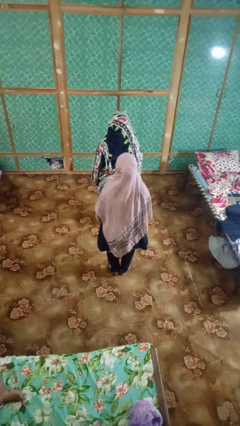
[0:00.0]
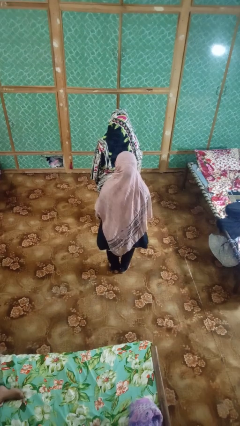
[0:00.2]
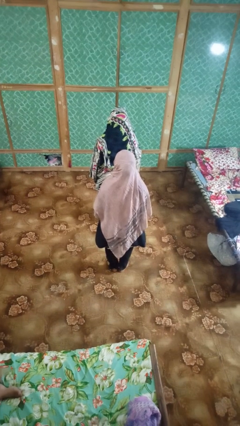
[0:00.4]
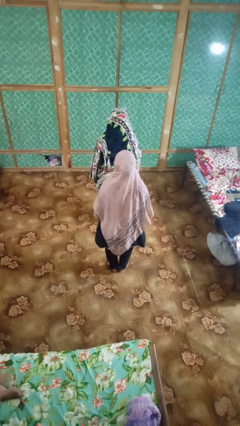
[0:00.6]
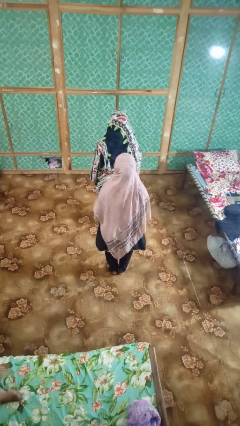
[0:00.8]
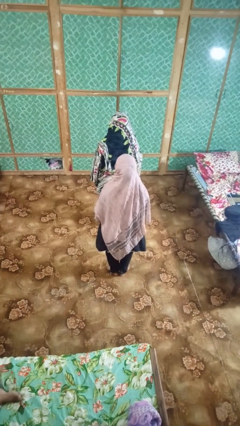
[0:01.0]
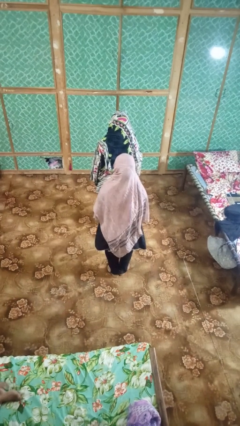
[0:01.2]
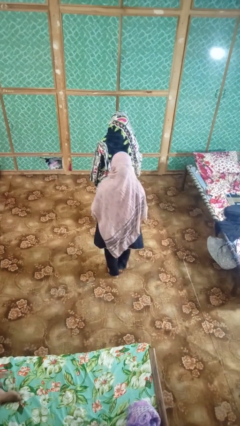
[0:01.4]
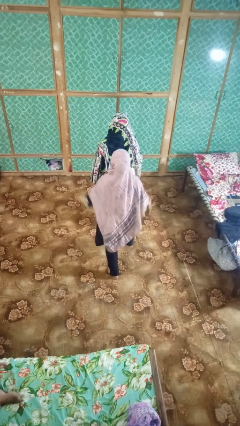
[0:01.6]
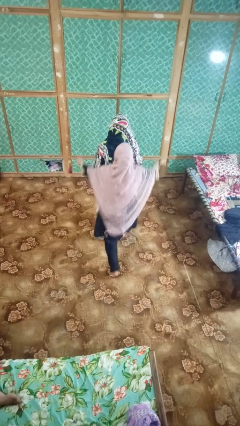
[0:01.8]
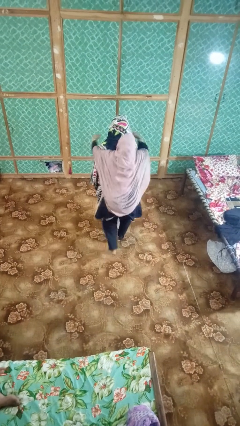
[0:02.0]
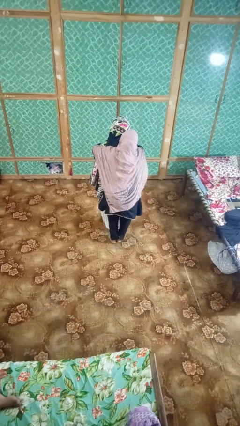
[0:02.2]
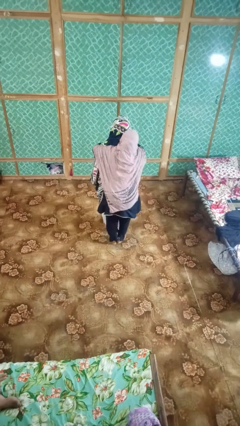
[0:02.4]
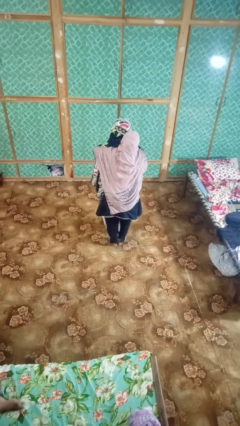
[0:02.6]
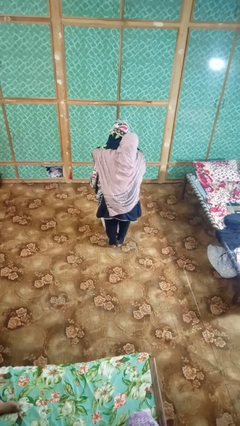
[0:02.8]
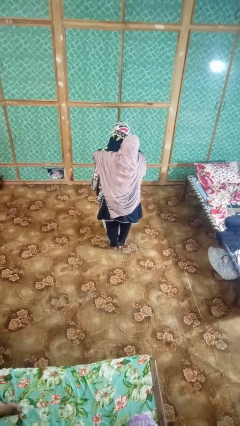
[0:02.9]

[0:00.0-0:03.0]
person hugs person from behind

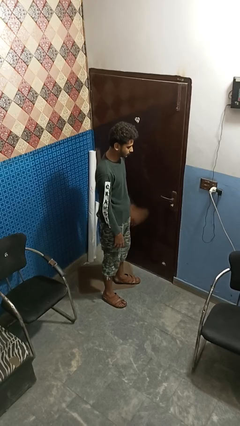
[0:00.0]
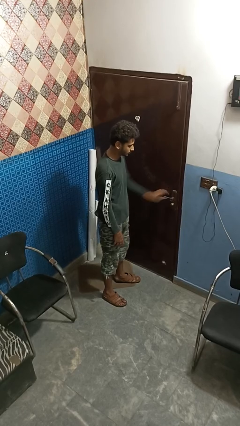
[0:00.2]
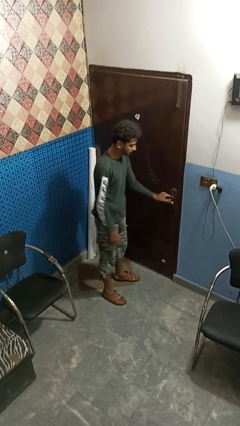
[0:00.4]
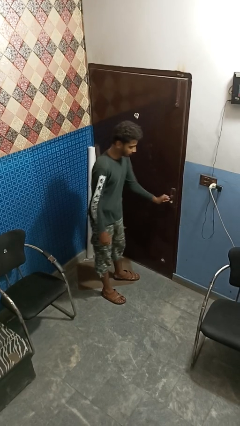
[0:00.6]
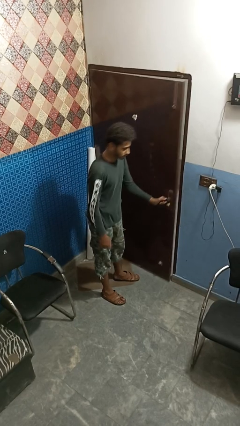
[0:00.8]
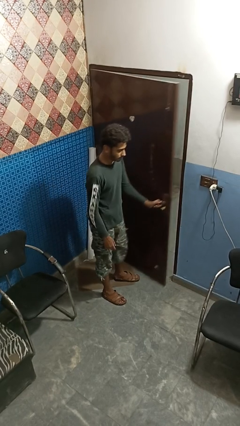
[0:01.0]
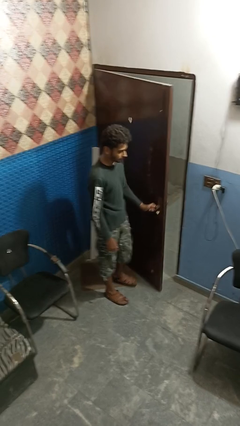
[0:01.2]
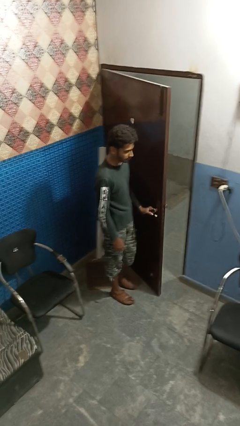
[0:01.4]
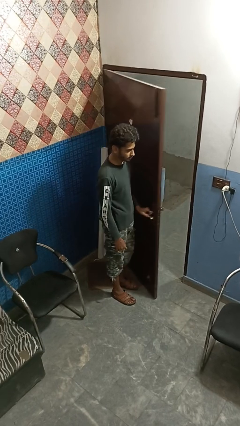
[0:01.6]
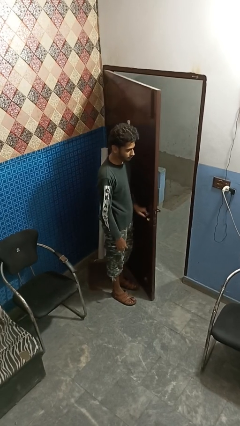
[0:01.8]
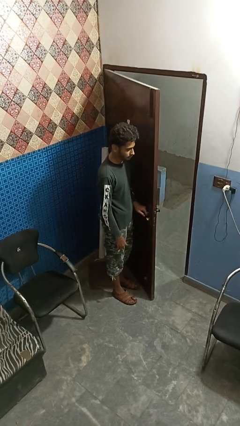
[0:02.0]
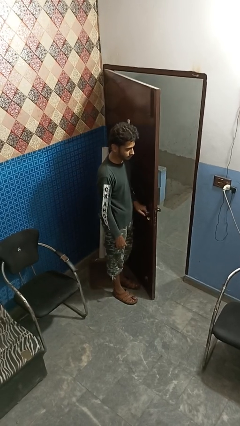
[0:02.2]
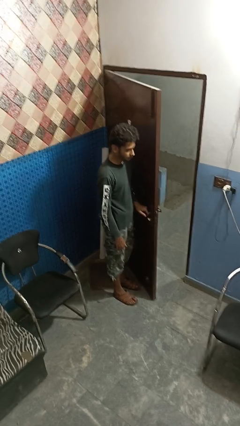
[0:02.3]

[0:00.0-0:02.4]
person opens facility door

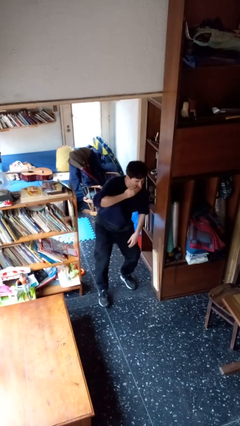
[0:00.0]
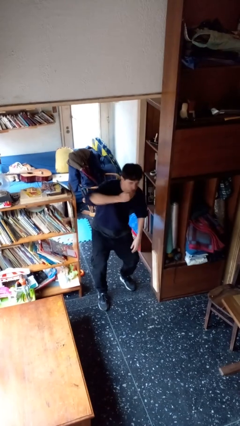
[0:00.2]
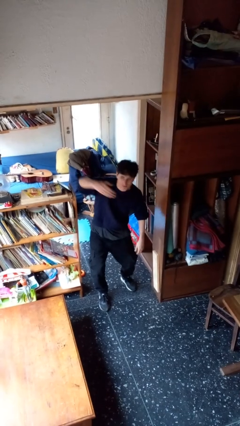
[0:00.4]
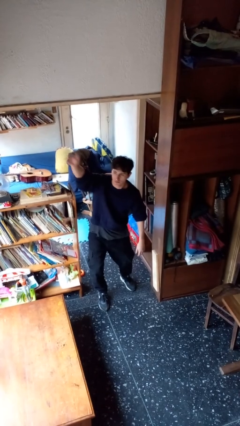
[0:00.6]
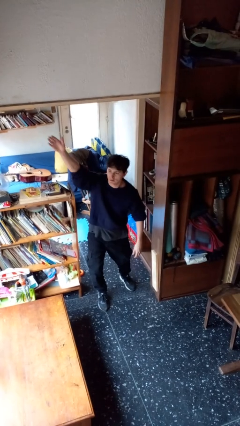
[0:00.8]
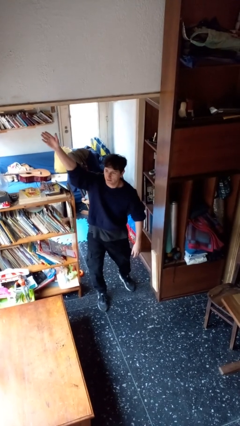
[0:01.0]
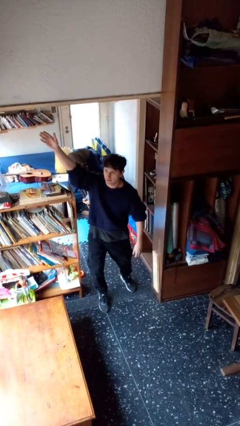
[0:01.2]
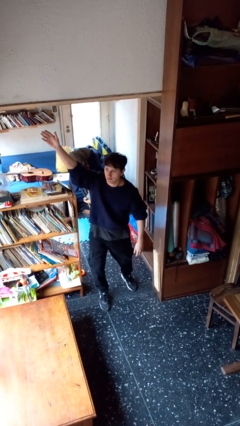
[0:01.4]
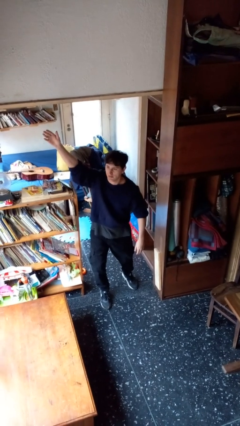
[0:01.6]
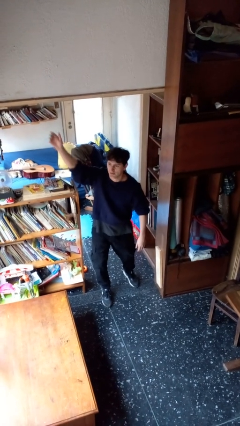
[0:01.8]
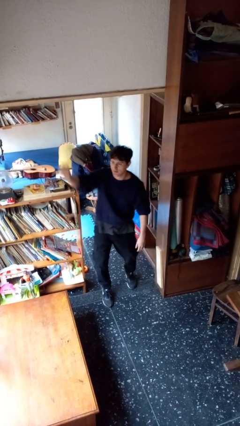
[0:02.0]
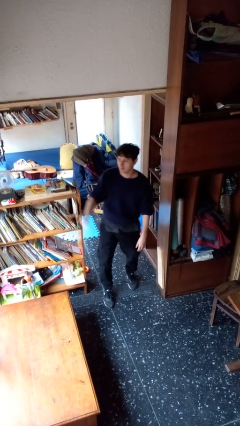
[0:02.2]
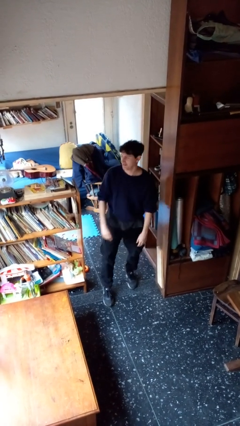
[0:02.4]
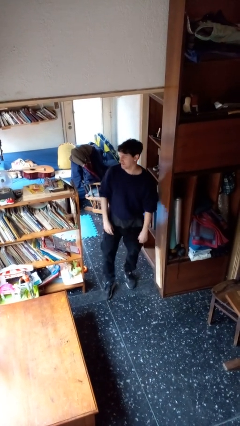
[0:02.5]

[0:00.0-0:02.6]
person gestures blow kiss

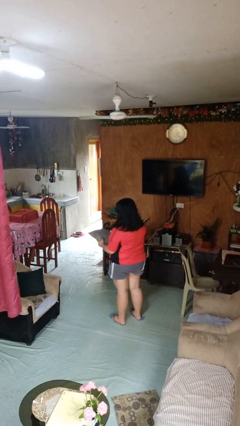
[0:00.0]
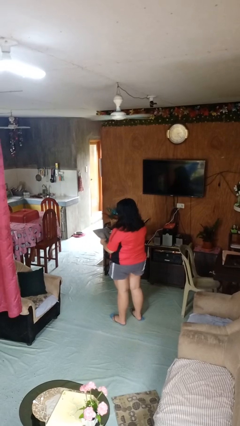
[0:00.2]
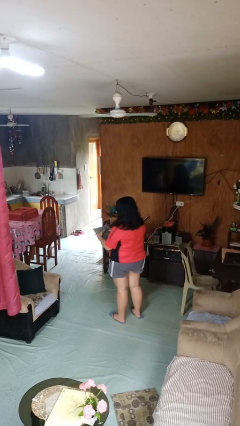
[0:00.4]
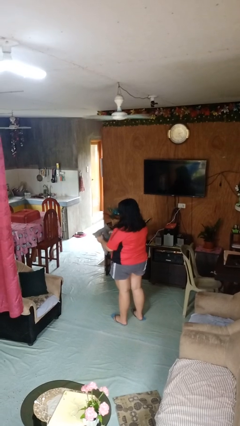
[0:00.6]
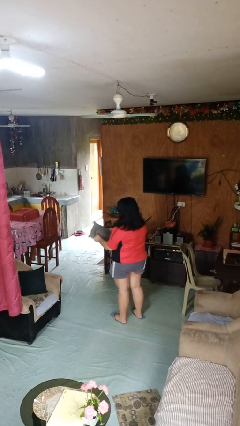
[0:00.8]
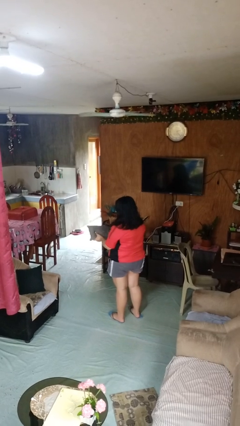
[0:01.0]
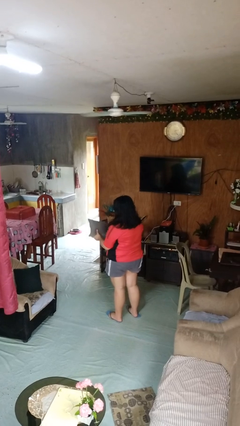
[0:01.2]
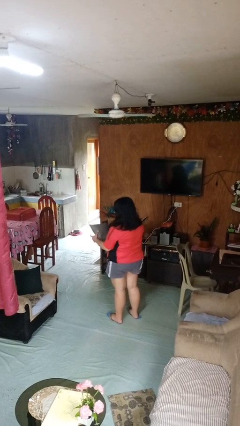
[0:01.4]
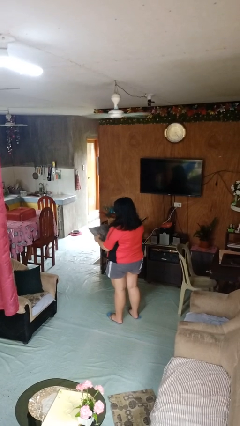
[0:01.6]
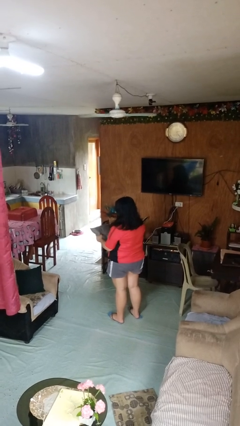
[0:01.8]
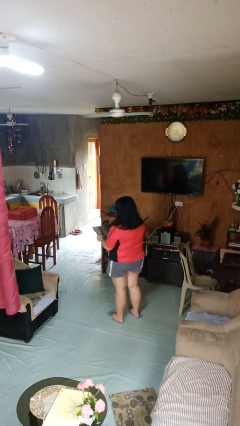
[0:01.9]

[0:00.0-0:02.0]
person squeezes object

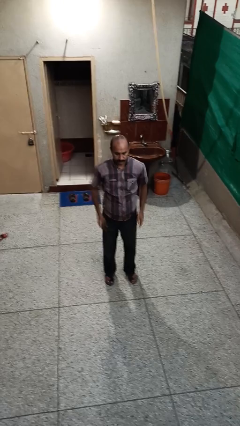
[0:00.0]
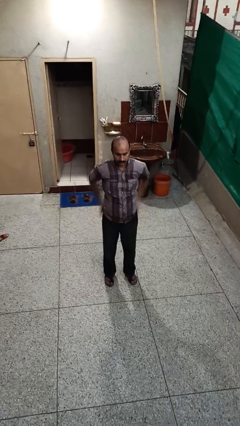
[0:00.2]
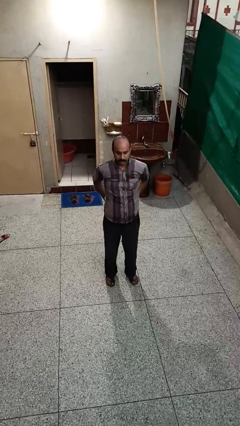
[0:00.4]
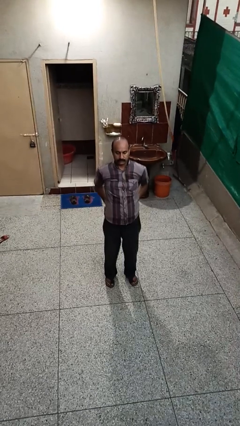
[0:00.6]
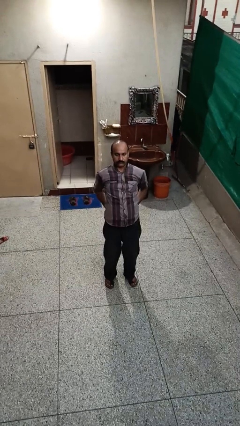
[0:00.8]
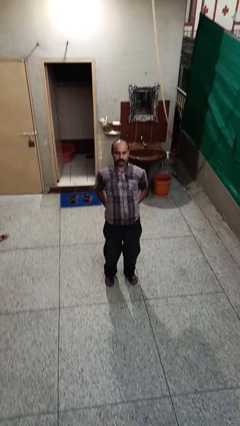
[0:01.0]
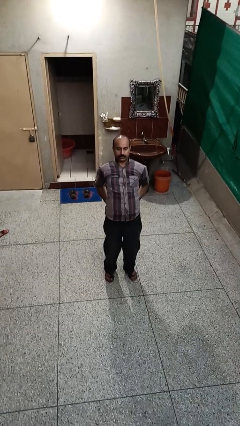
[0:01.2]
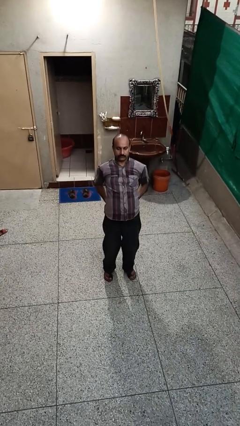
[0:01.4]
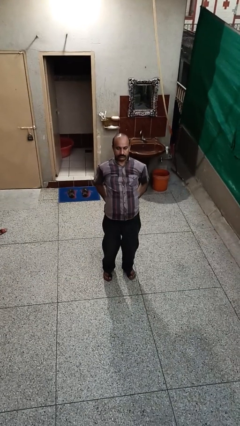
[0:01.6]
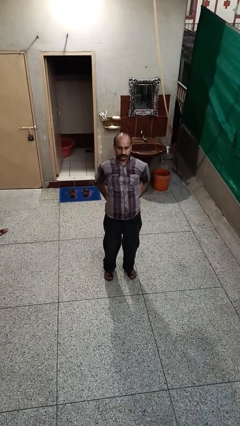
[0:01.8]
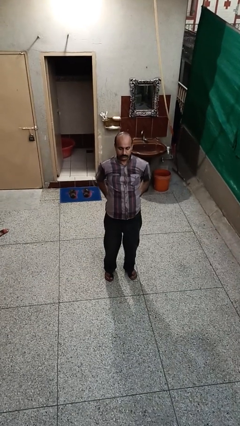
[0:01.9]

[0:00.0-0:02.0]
person stretches back

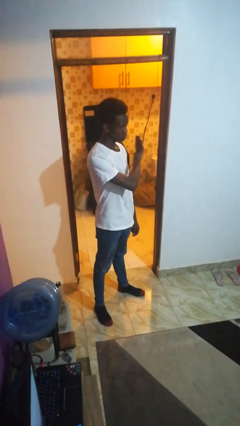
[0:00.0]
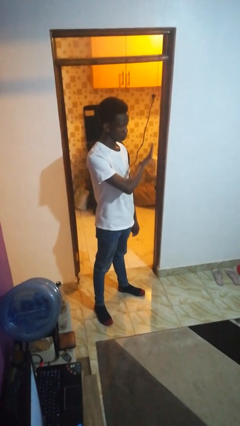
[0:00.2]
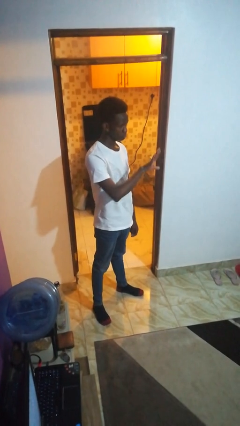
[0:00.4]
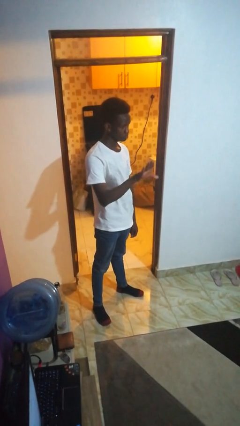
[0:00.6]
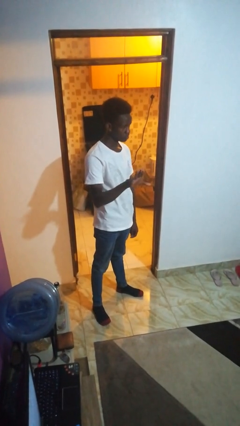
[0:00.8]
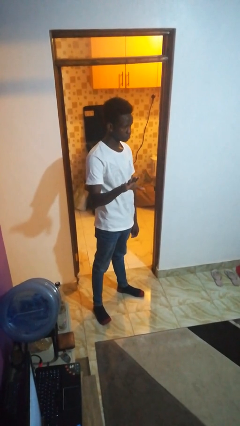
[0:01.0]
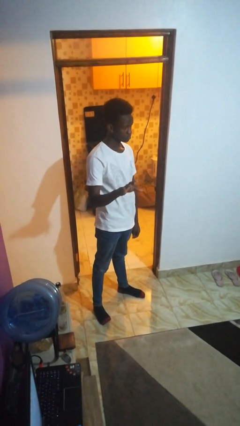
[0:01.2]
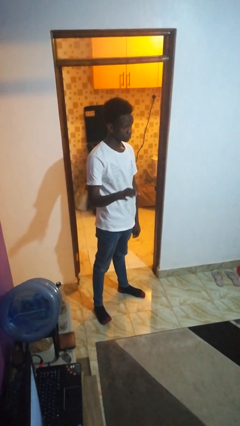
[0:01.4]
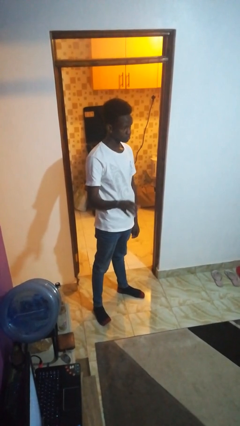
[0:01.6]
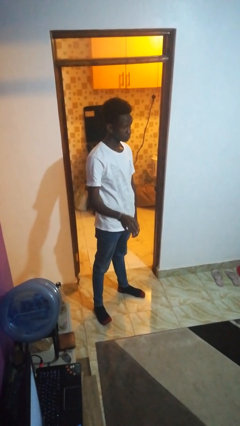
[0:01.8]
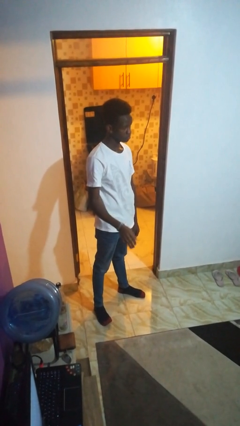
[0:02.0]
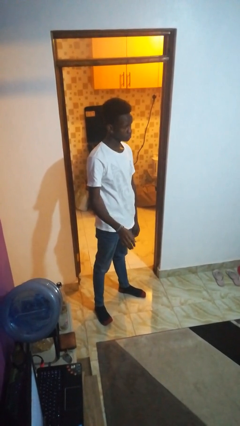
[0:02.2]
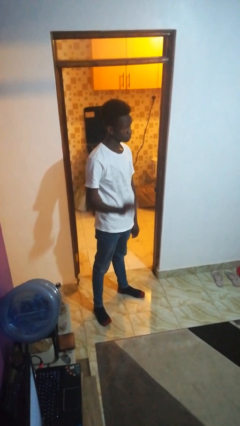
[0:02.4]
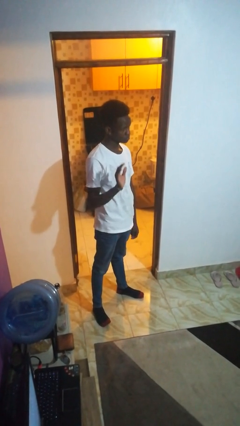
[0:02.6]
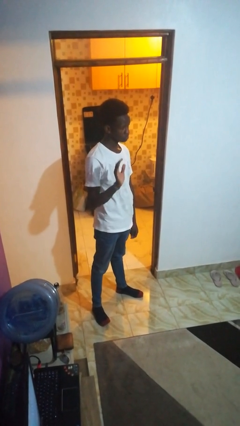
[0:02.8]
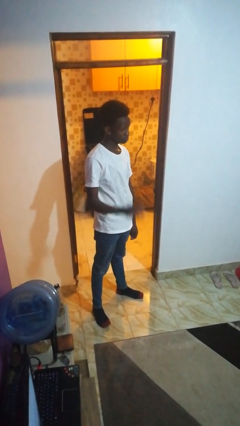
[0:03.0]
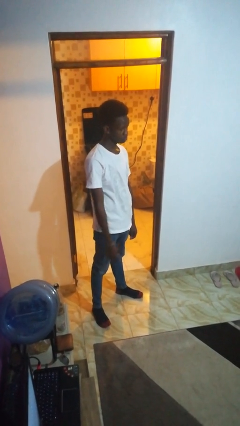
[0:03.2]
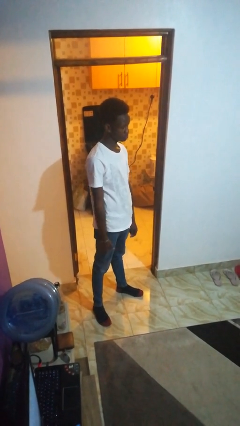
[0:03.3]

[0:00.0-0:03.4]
person gestures swipe right

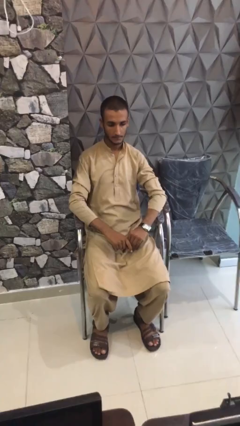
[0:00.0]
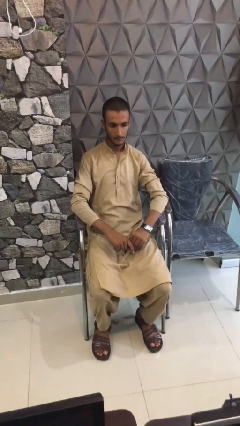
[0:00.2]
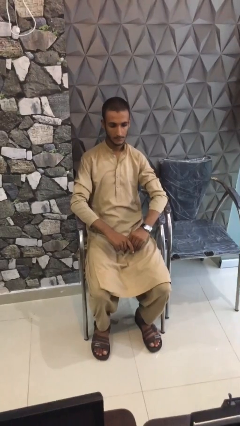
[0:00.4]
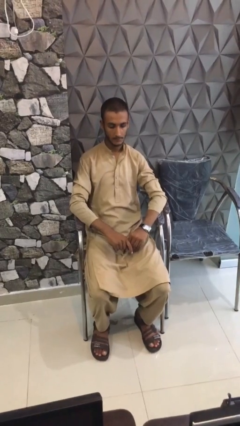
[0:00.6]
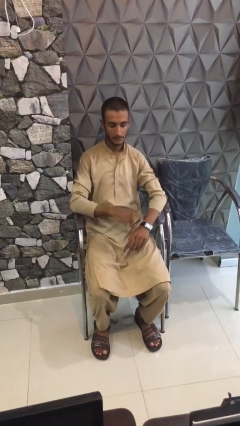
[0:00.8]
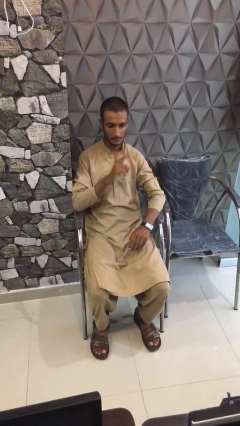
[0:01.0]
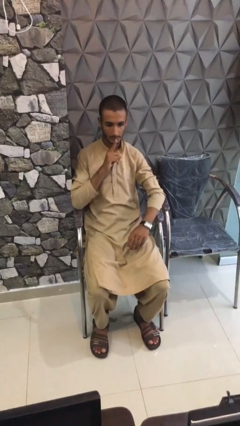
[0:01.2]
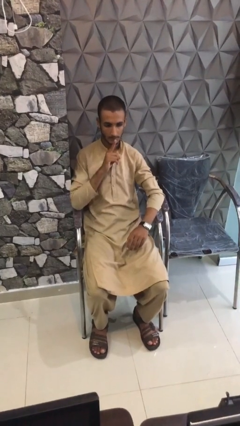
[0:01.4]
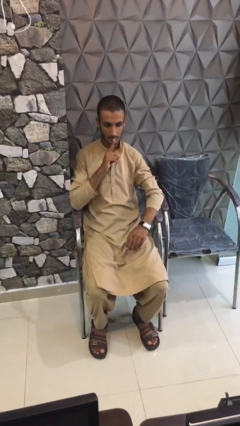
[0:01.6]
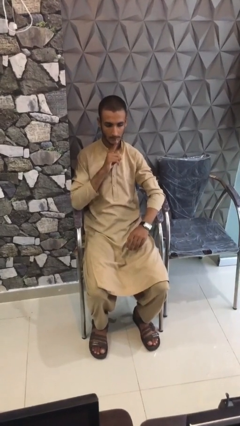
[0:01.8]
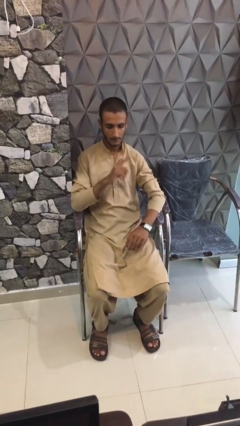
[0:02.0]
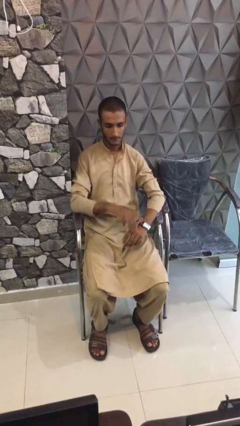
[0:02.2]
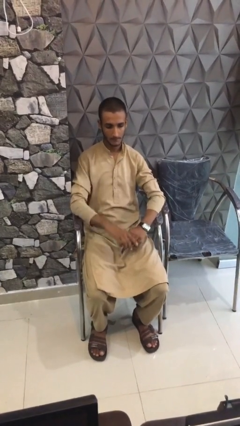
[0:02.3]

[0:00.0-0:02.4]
person gestures be quiet
